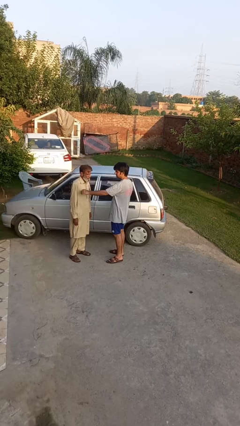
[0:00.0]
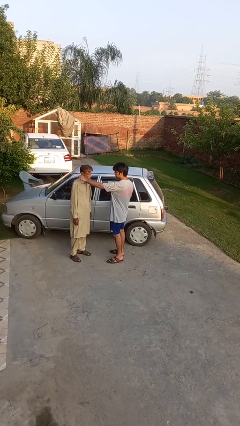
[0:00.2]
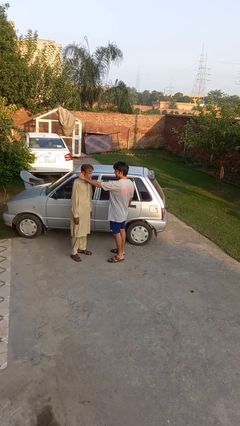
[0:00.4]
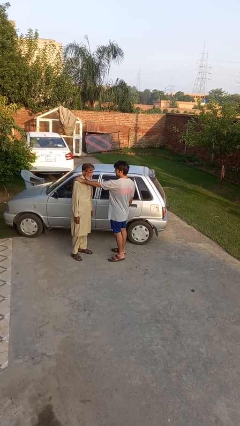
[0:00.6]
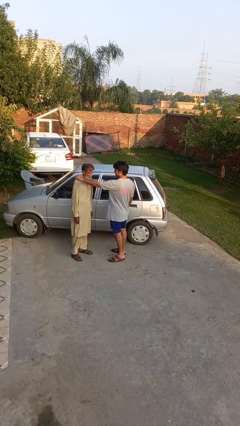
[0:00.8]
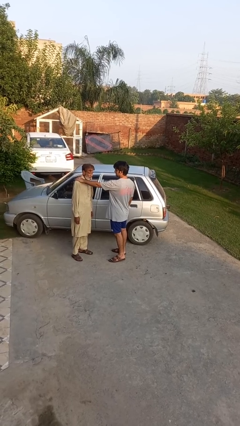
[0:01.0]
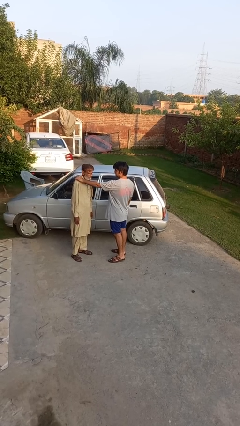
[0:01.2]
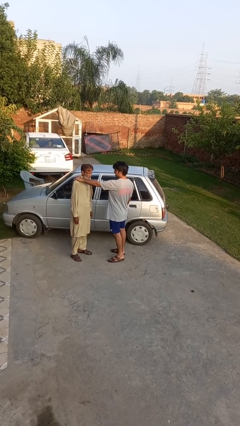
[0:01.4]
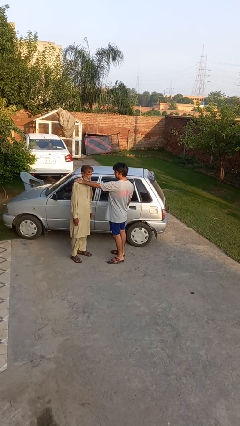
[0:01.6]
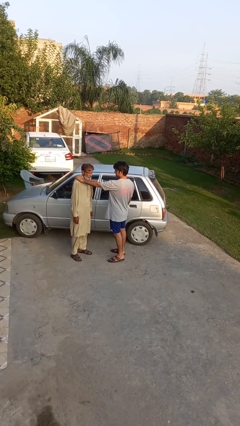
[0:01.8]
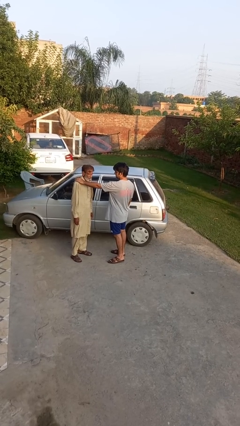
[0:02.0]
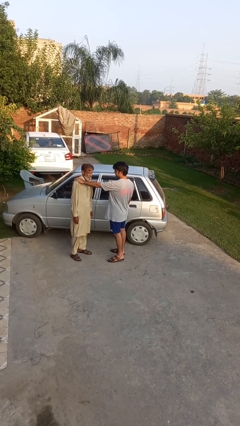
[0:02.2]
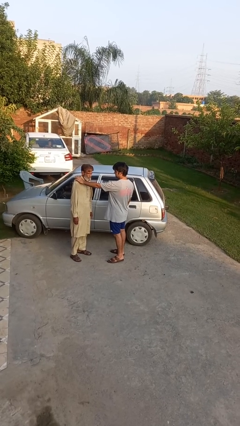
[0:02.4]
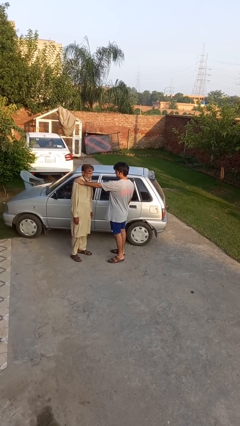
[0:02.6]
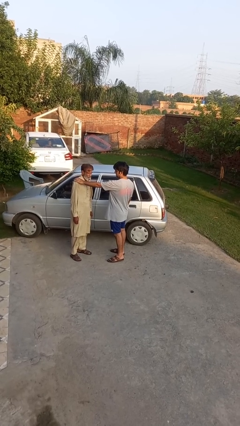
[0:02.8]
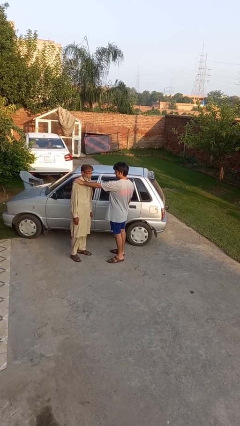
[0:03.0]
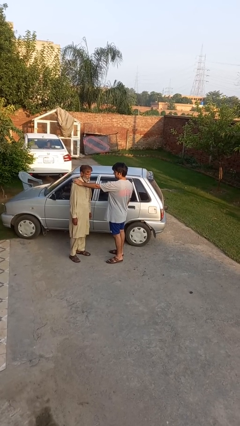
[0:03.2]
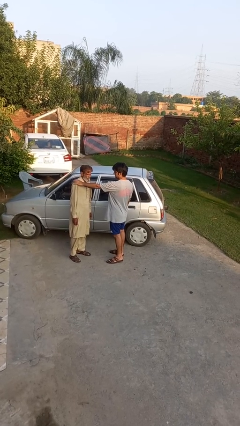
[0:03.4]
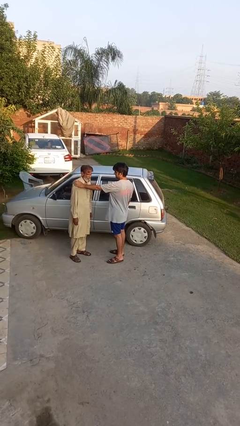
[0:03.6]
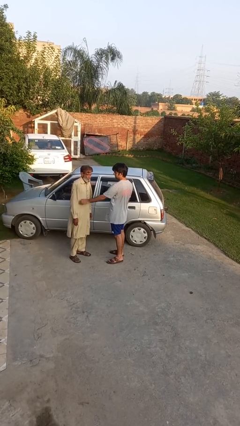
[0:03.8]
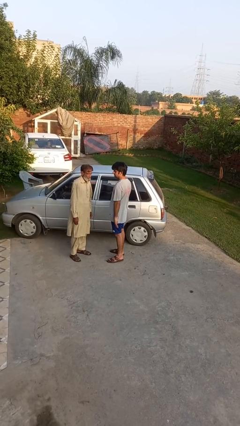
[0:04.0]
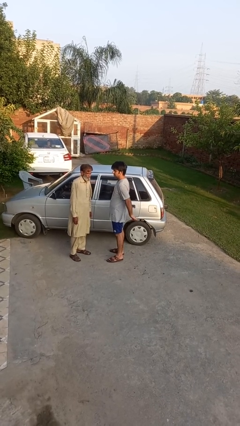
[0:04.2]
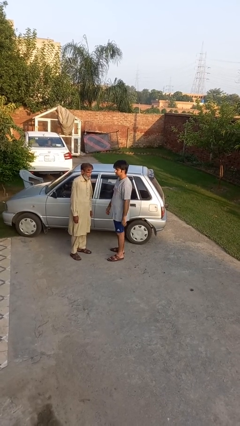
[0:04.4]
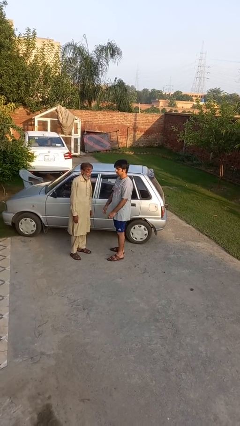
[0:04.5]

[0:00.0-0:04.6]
person pounds shoulders of person

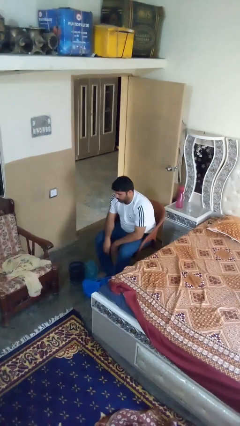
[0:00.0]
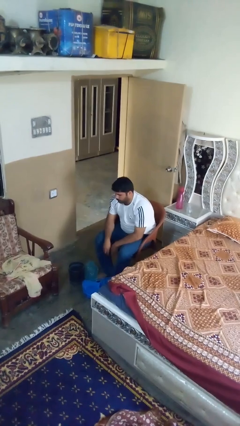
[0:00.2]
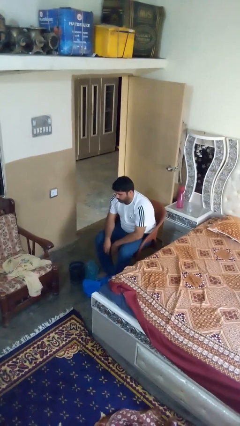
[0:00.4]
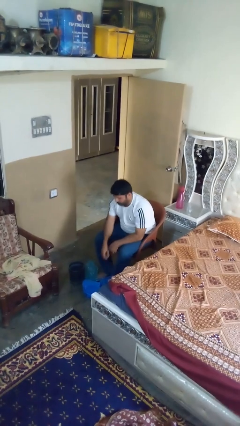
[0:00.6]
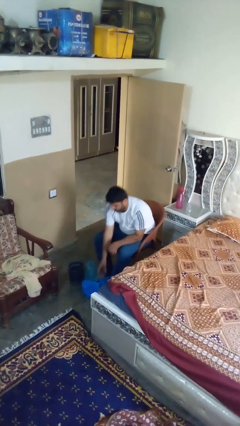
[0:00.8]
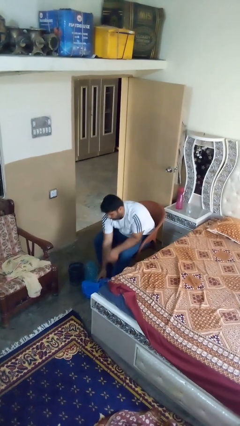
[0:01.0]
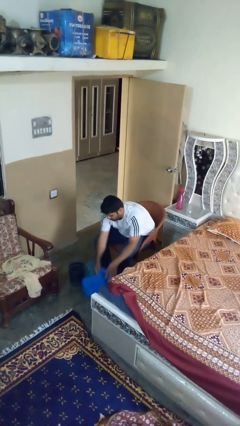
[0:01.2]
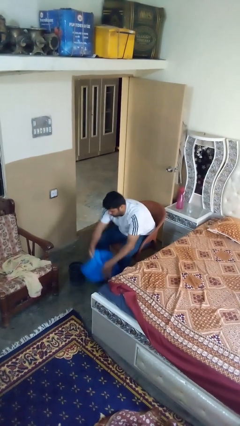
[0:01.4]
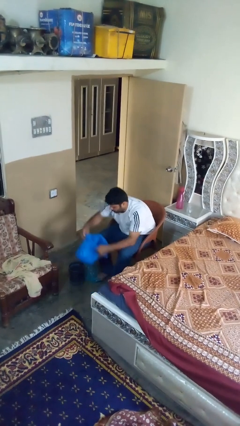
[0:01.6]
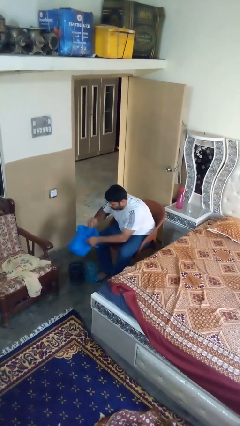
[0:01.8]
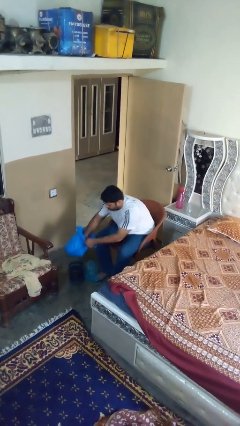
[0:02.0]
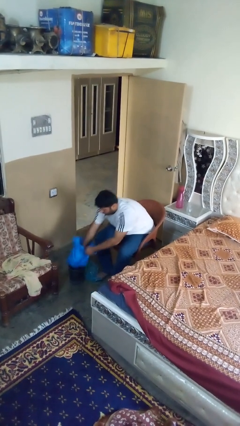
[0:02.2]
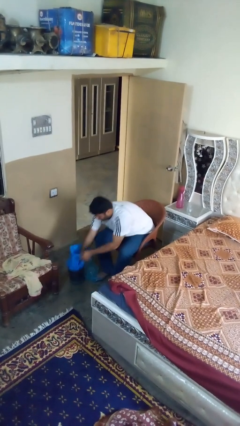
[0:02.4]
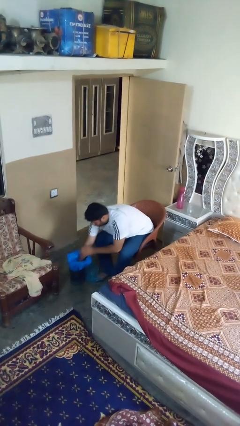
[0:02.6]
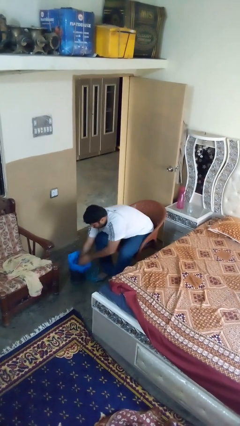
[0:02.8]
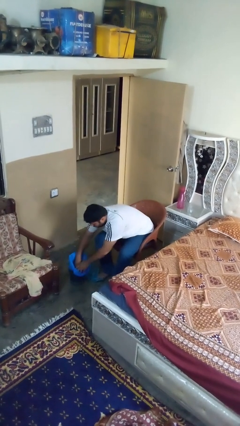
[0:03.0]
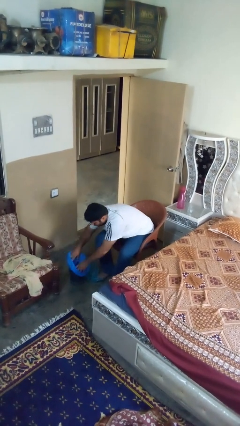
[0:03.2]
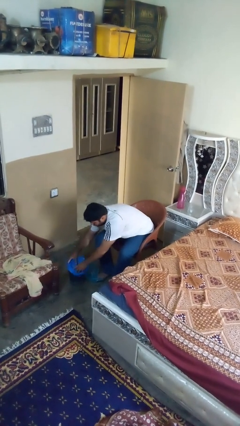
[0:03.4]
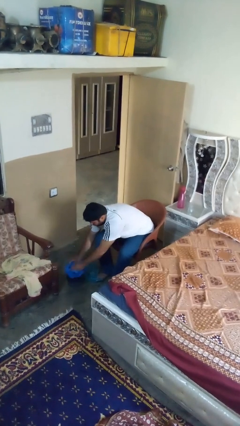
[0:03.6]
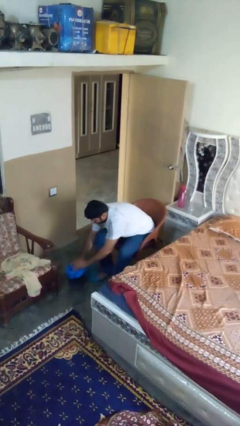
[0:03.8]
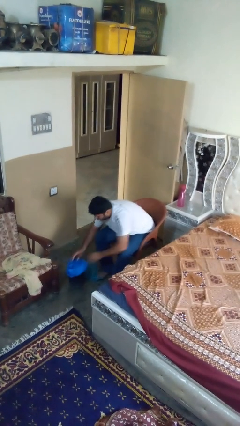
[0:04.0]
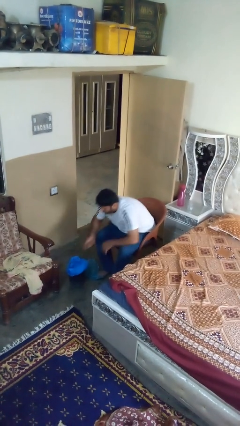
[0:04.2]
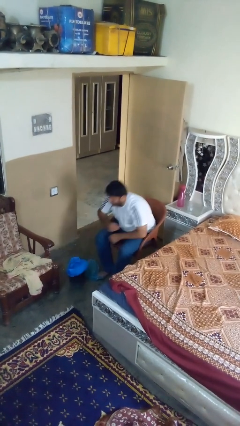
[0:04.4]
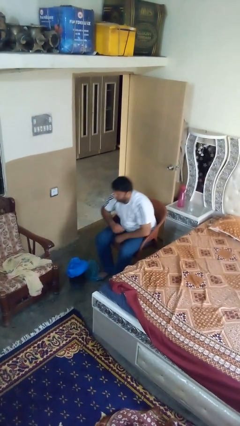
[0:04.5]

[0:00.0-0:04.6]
person inserts trashbag into trashcan

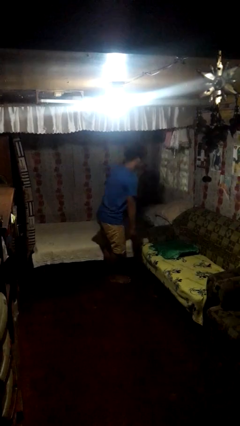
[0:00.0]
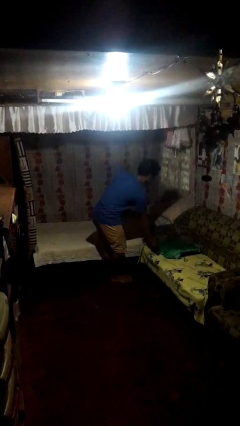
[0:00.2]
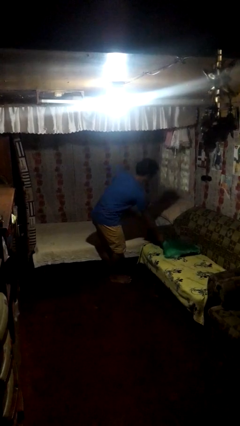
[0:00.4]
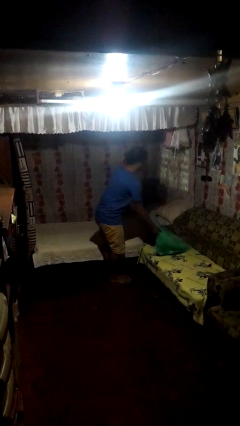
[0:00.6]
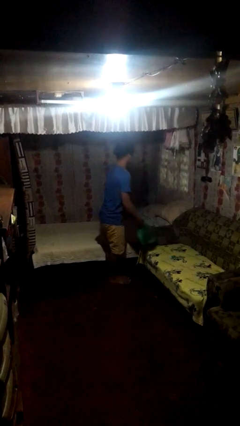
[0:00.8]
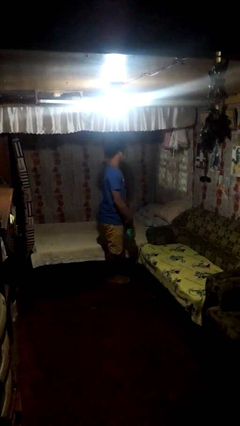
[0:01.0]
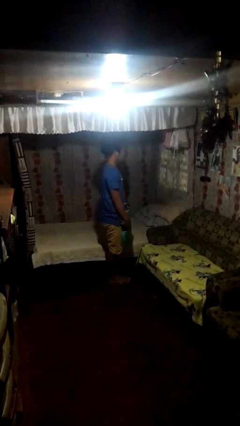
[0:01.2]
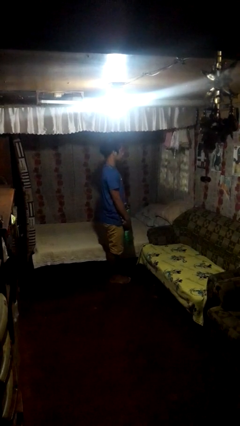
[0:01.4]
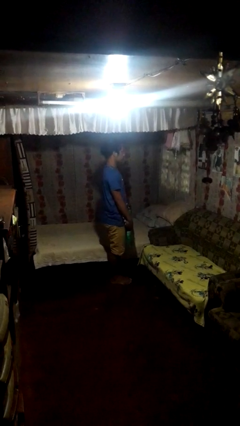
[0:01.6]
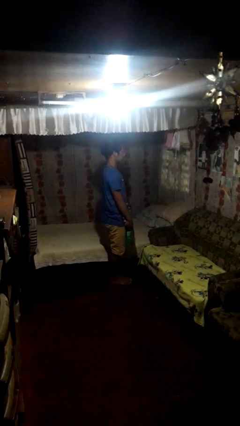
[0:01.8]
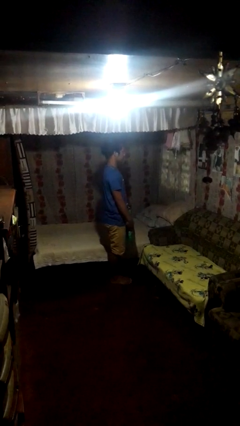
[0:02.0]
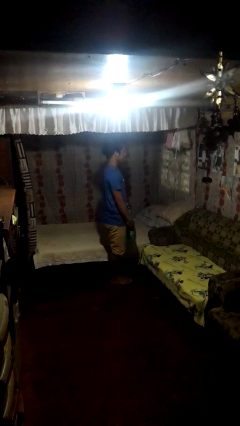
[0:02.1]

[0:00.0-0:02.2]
person picks up object from couch

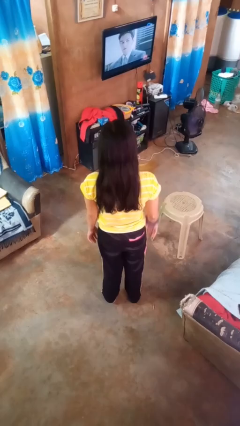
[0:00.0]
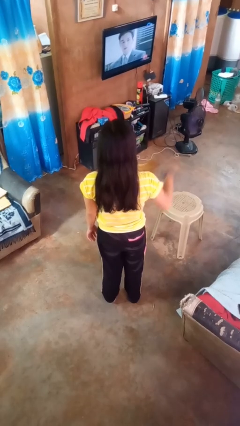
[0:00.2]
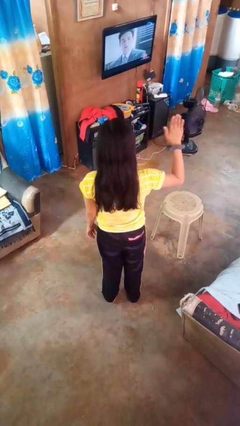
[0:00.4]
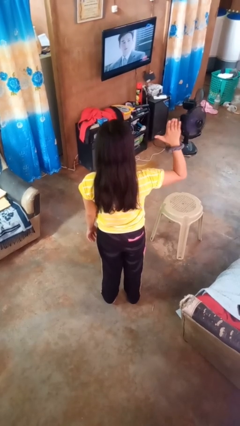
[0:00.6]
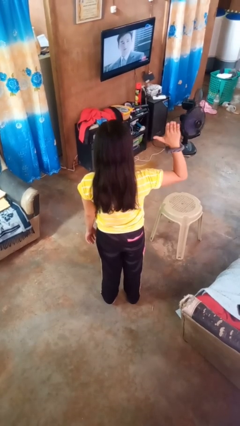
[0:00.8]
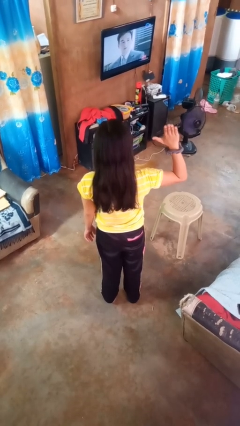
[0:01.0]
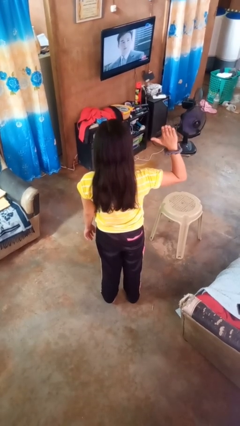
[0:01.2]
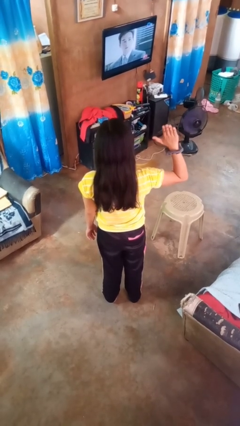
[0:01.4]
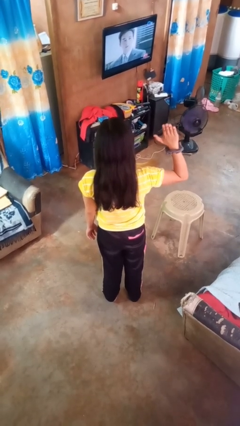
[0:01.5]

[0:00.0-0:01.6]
person gestures number five

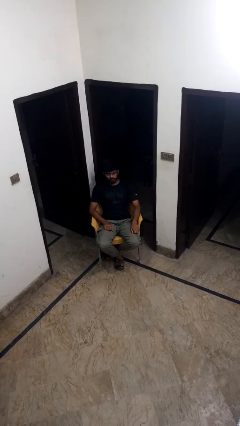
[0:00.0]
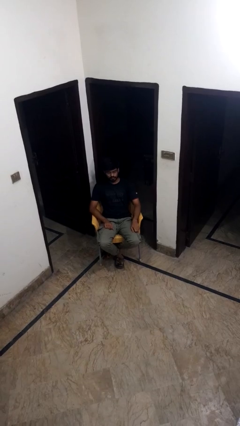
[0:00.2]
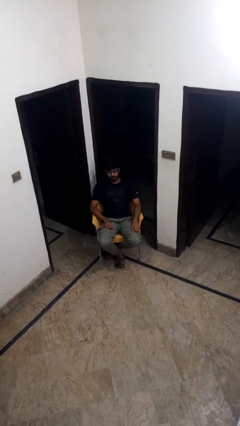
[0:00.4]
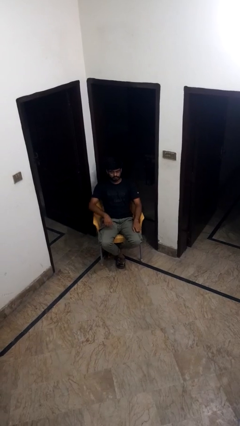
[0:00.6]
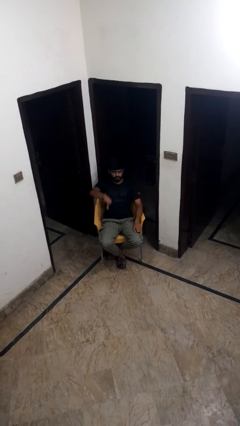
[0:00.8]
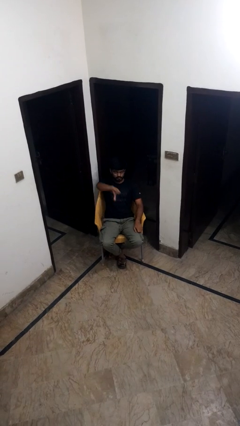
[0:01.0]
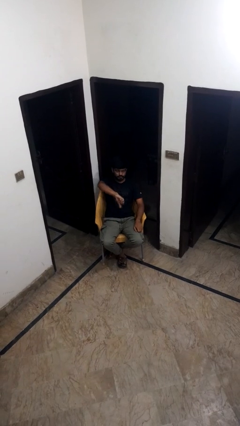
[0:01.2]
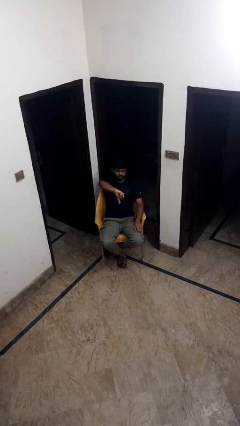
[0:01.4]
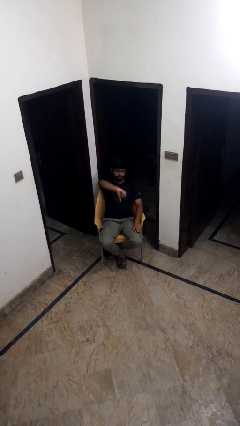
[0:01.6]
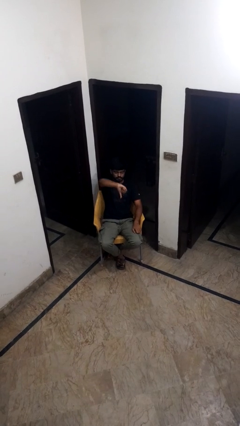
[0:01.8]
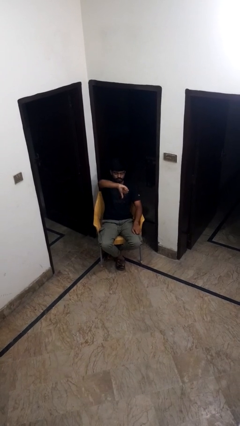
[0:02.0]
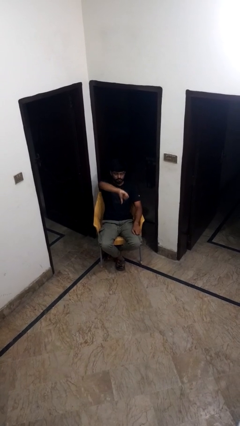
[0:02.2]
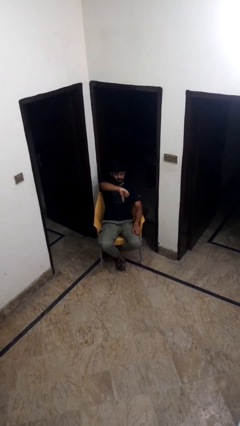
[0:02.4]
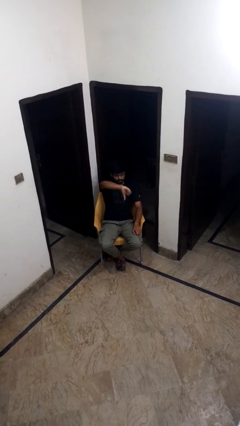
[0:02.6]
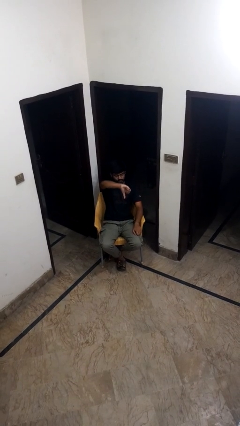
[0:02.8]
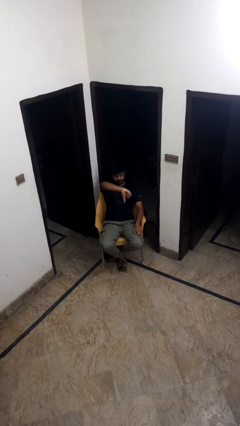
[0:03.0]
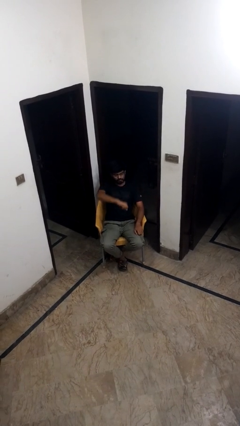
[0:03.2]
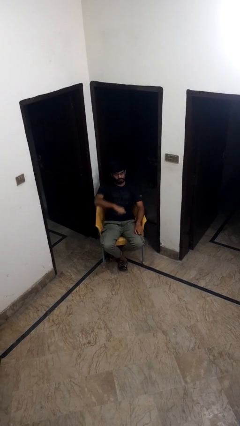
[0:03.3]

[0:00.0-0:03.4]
person gestures thumbs down

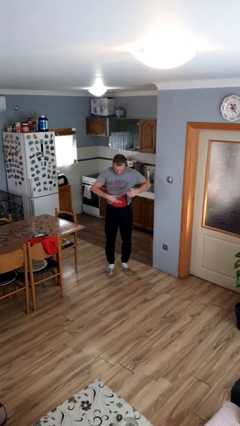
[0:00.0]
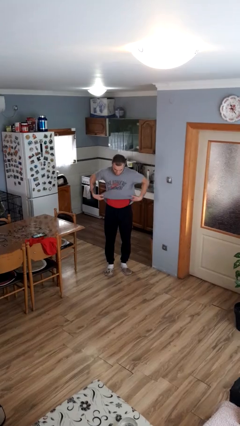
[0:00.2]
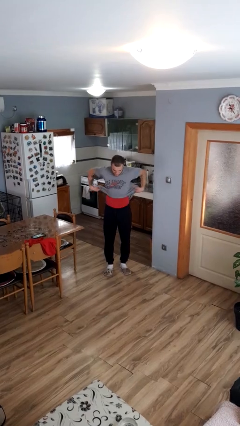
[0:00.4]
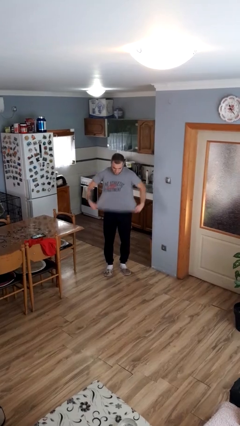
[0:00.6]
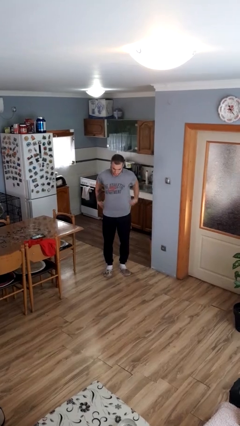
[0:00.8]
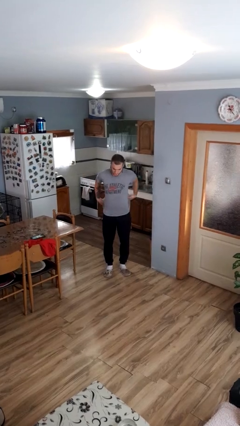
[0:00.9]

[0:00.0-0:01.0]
person untucks shirt
